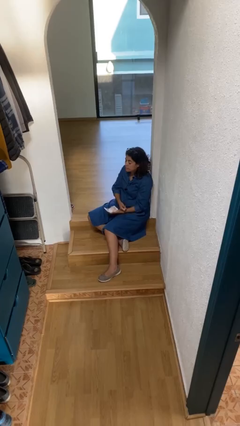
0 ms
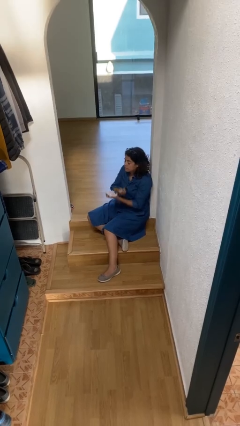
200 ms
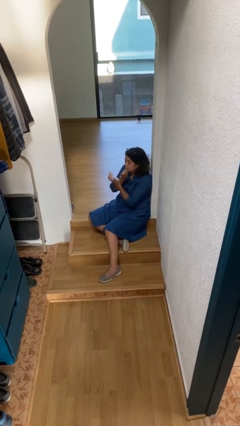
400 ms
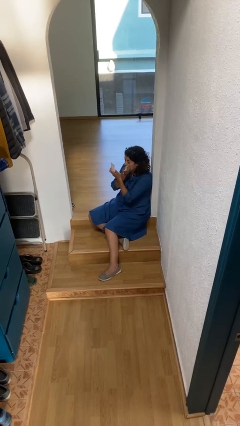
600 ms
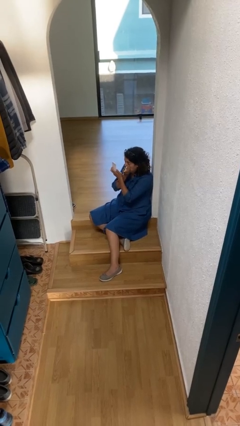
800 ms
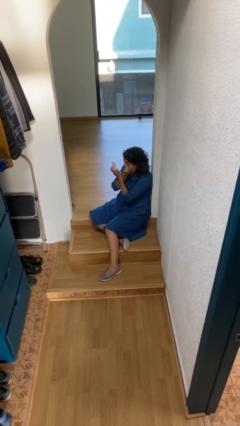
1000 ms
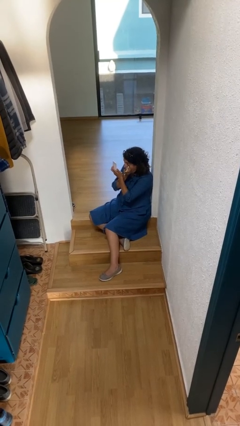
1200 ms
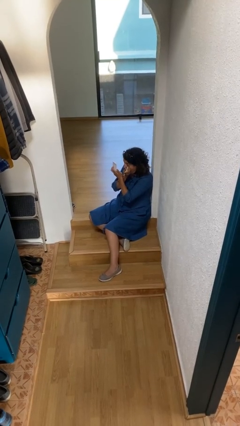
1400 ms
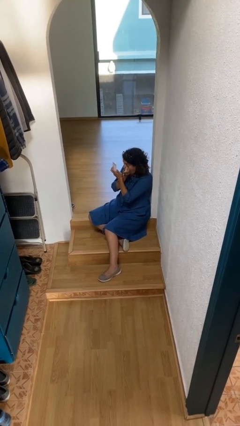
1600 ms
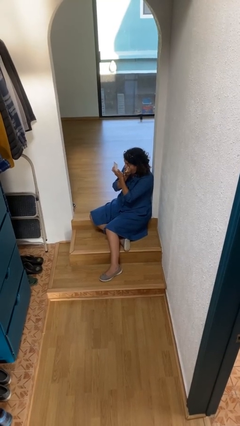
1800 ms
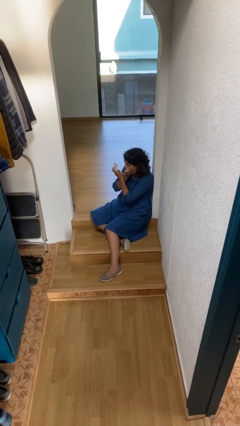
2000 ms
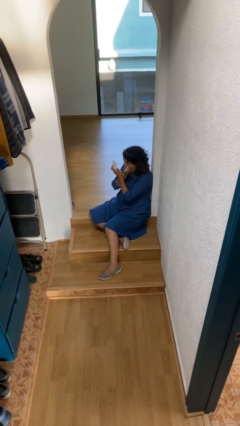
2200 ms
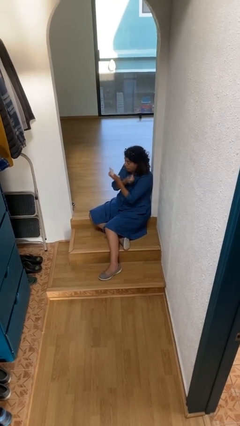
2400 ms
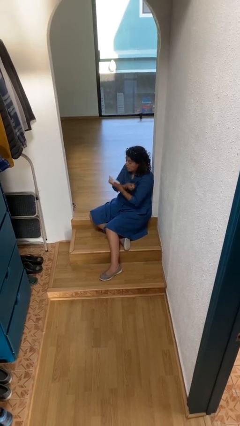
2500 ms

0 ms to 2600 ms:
person applies eye makeup

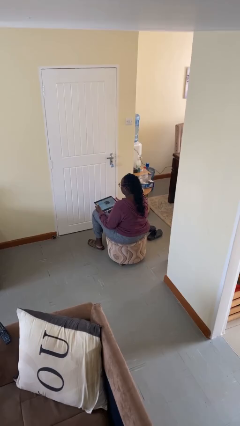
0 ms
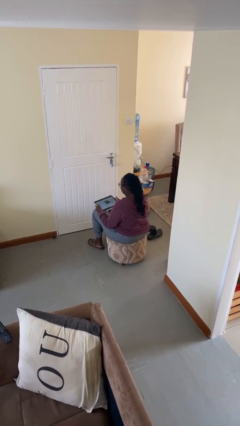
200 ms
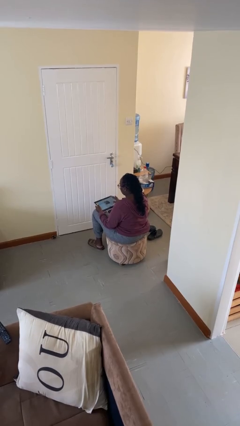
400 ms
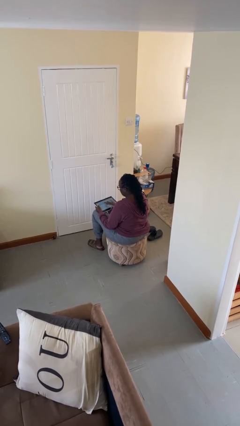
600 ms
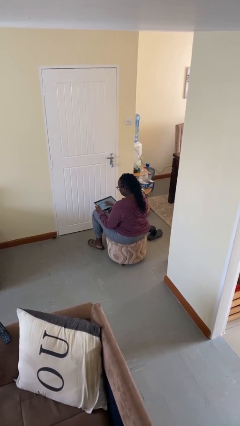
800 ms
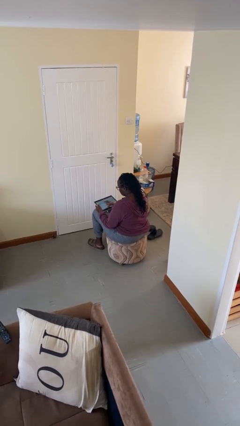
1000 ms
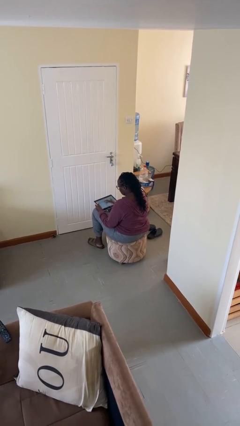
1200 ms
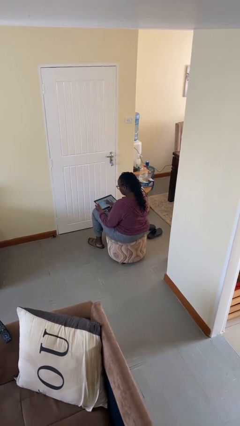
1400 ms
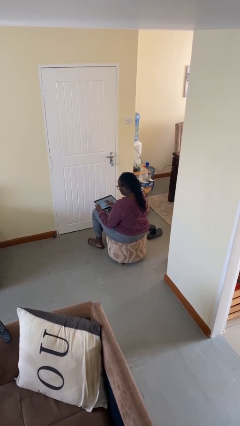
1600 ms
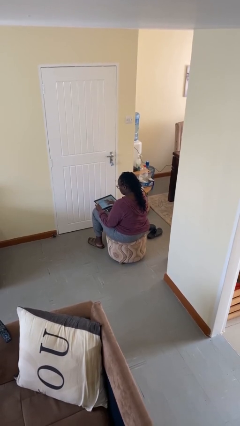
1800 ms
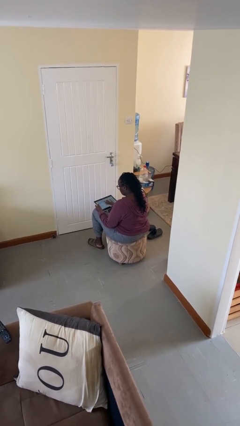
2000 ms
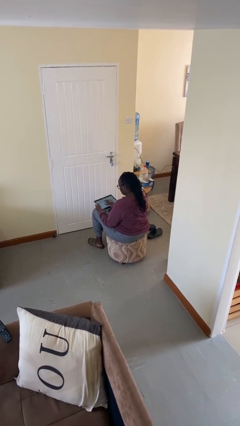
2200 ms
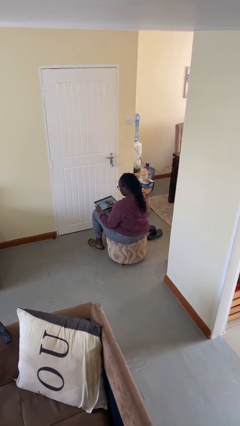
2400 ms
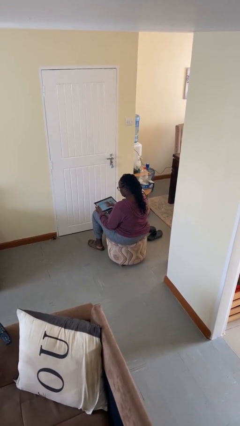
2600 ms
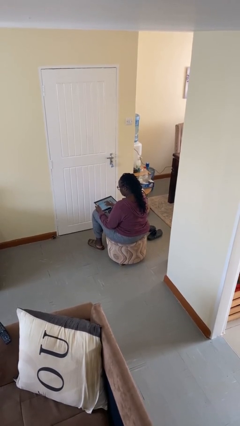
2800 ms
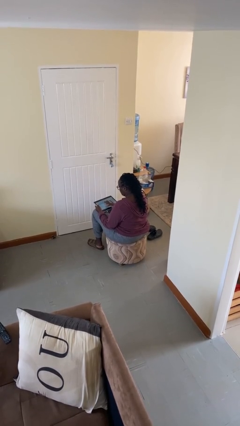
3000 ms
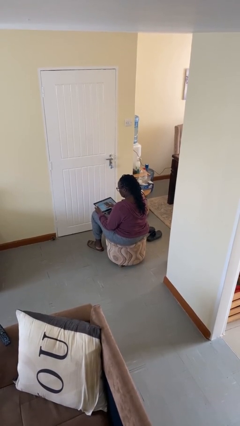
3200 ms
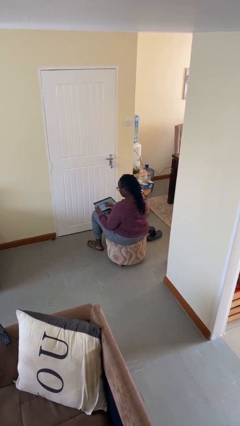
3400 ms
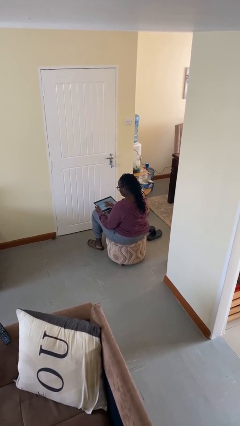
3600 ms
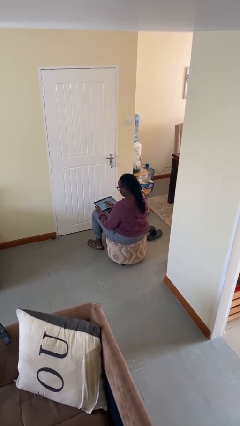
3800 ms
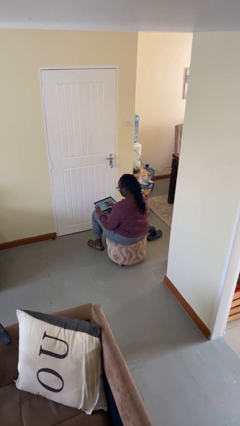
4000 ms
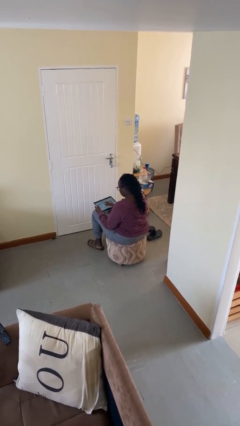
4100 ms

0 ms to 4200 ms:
person interacts with tablet

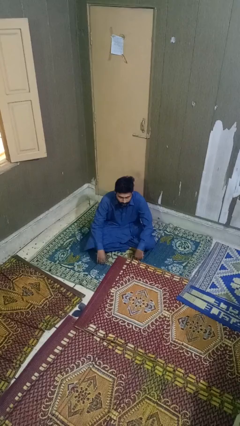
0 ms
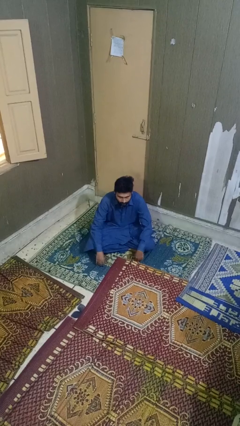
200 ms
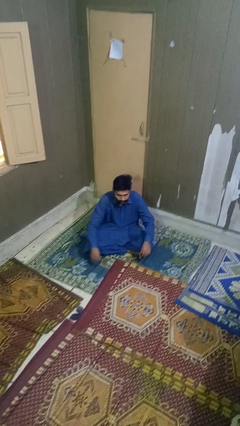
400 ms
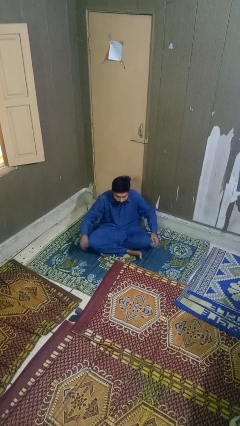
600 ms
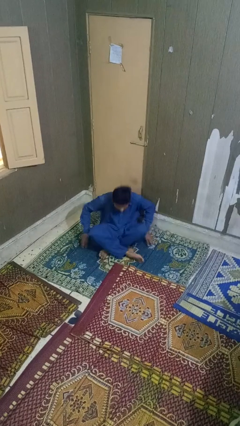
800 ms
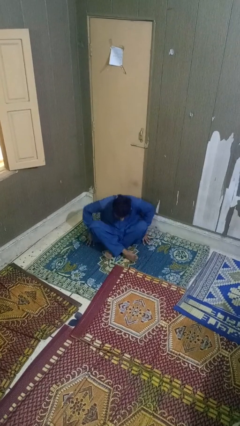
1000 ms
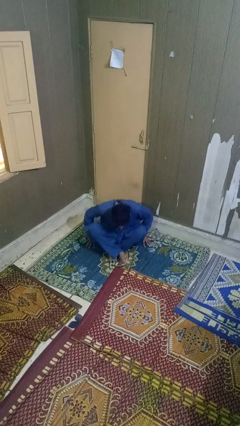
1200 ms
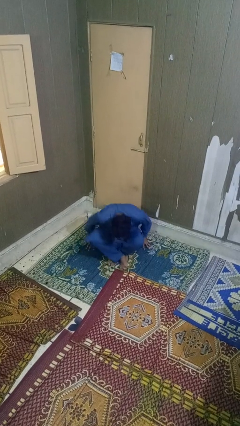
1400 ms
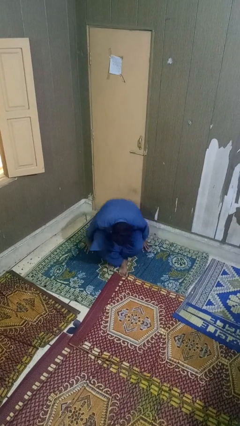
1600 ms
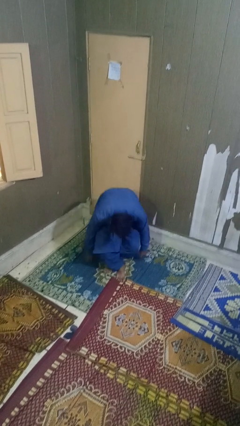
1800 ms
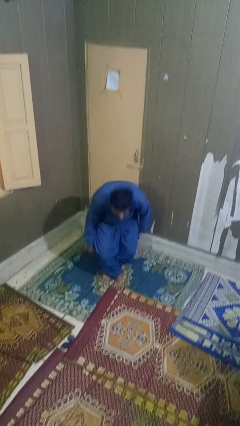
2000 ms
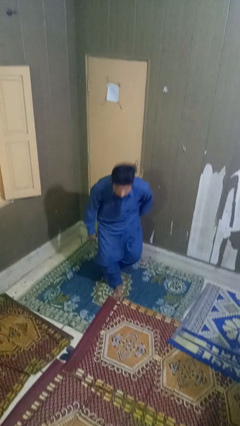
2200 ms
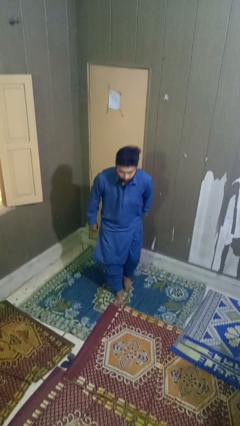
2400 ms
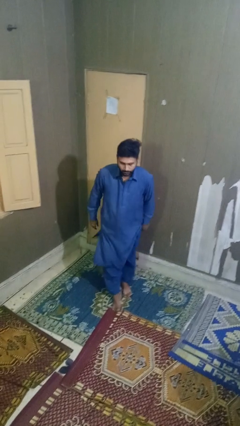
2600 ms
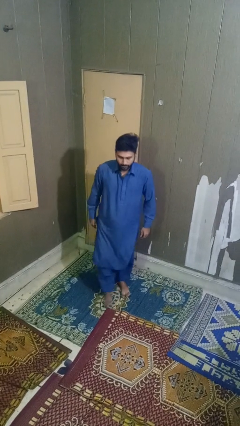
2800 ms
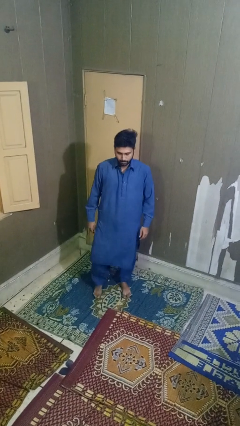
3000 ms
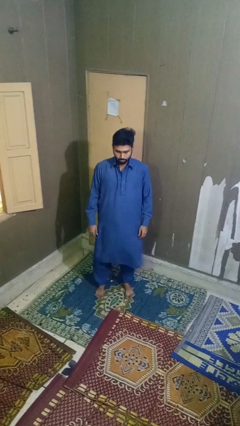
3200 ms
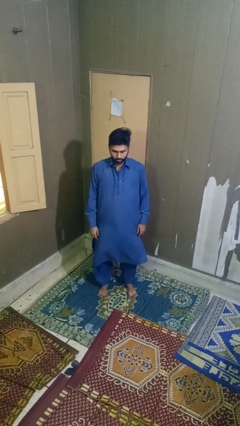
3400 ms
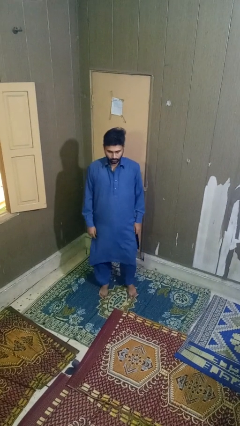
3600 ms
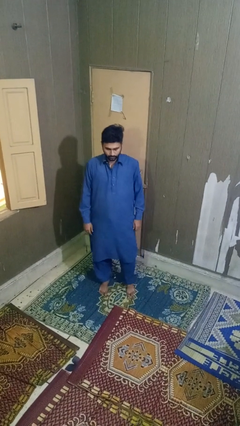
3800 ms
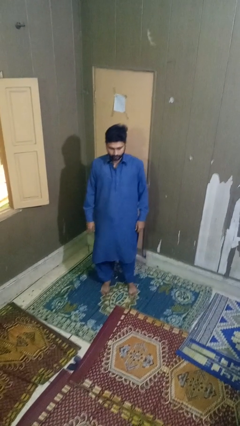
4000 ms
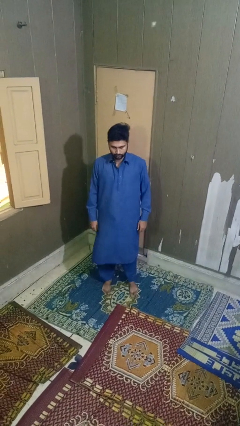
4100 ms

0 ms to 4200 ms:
person stands up from floor

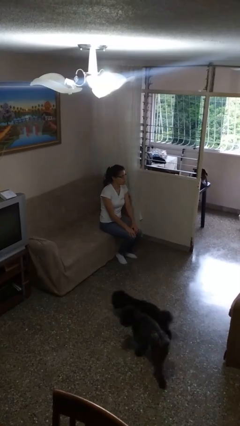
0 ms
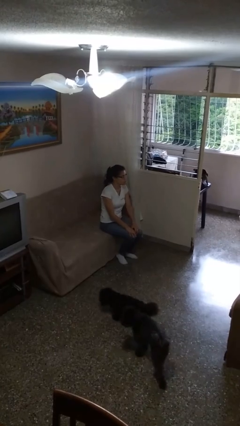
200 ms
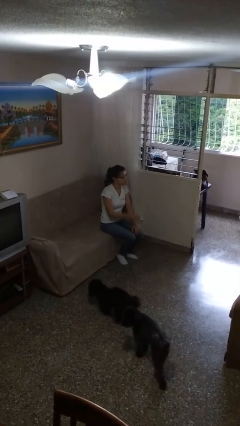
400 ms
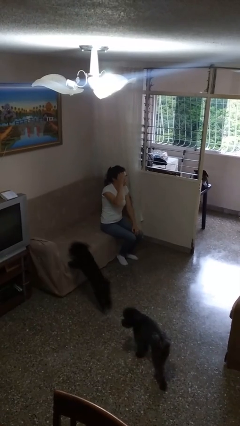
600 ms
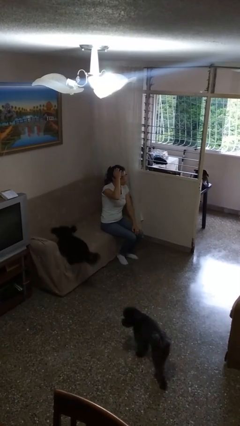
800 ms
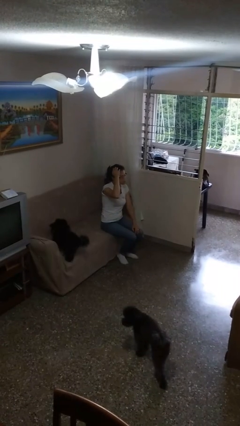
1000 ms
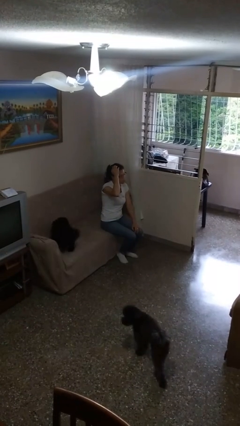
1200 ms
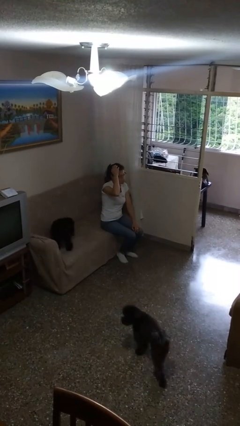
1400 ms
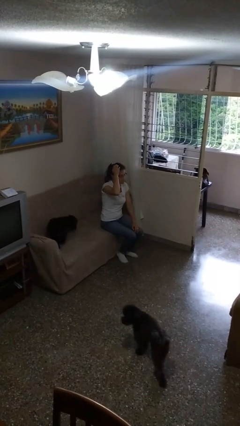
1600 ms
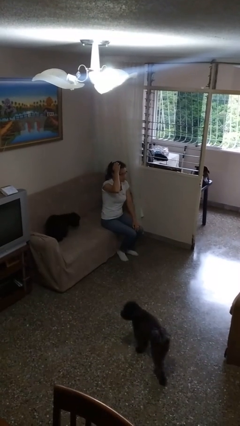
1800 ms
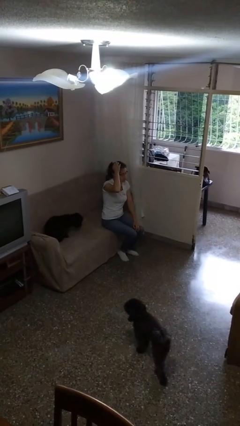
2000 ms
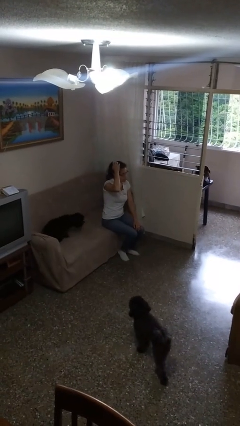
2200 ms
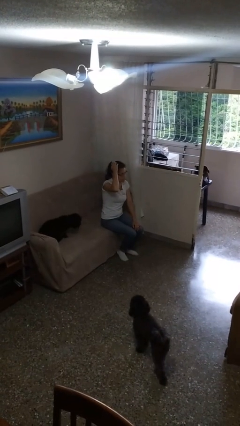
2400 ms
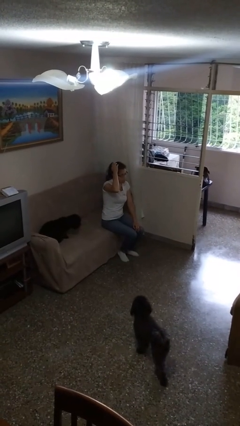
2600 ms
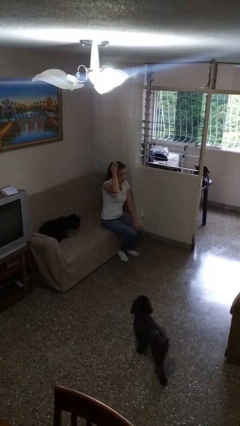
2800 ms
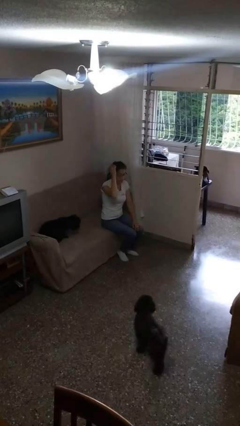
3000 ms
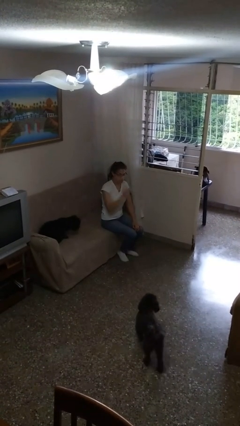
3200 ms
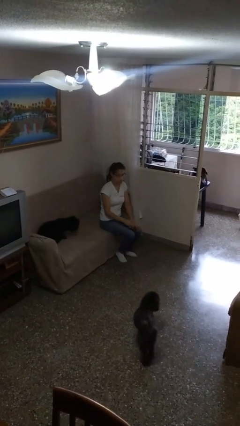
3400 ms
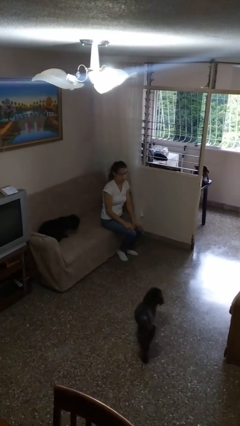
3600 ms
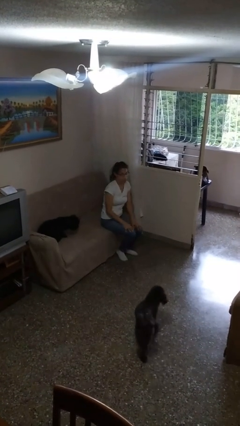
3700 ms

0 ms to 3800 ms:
person scratches face

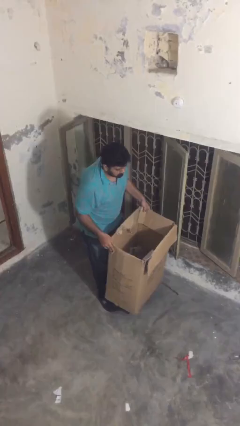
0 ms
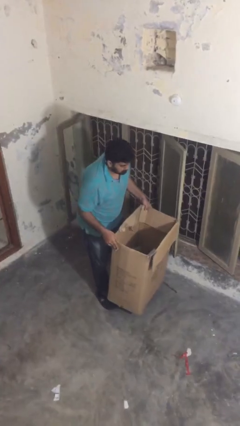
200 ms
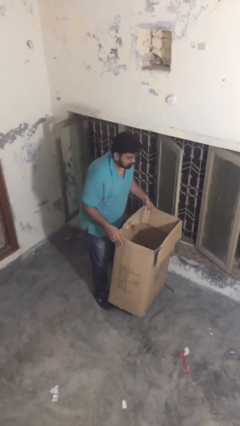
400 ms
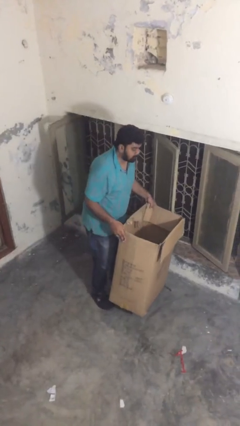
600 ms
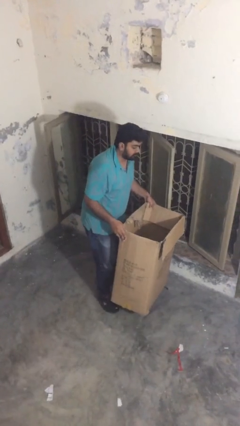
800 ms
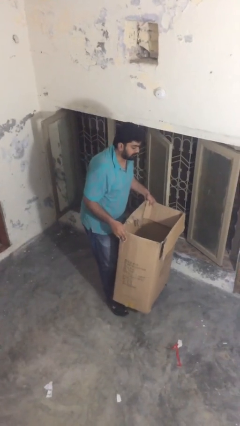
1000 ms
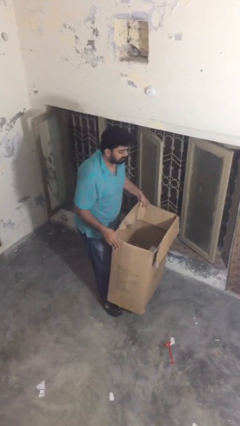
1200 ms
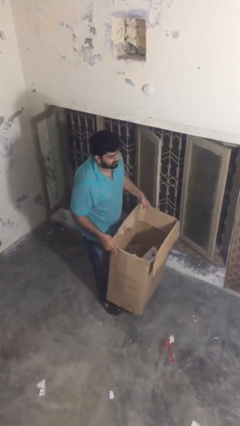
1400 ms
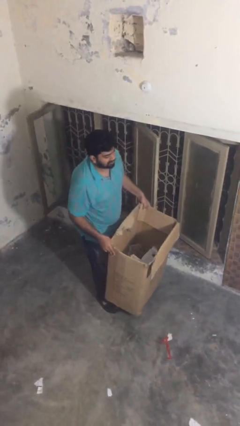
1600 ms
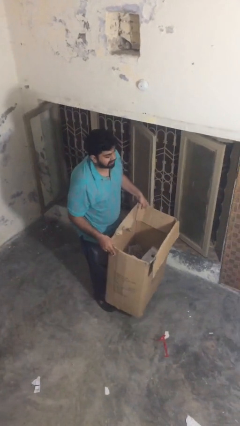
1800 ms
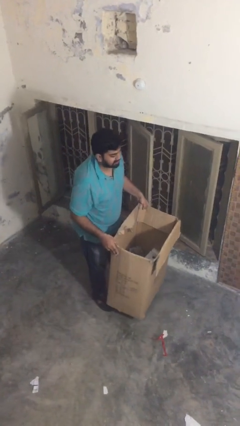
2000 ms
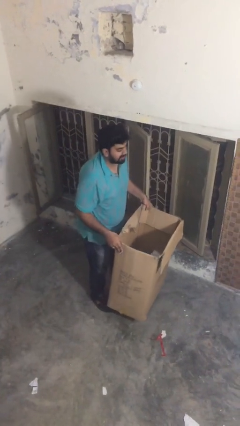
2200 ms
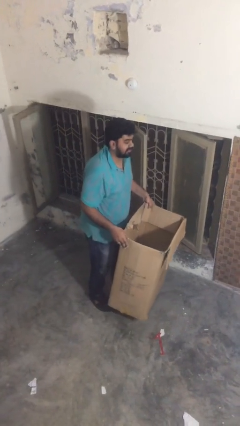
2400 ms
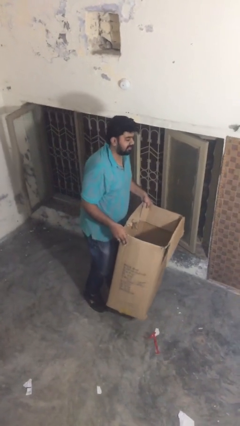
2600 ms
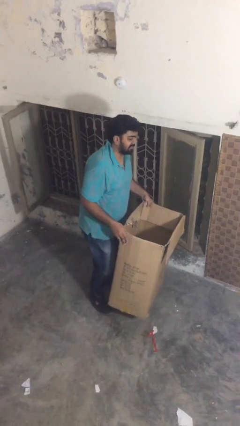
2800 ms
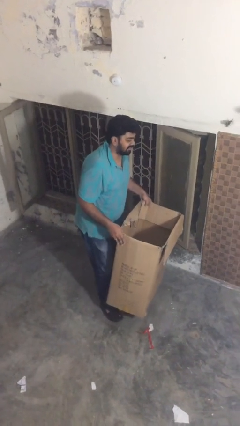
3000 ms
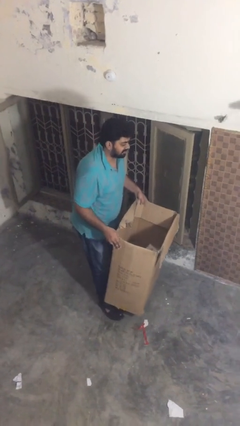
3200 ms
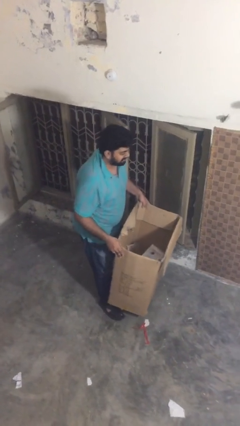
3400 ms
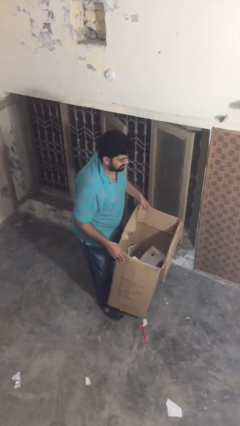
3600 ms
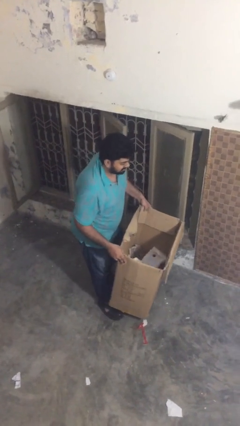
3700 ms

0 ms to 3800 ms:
person carries heavy object
